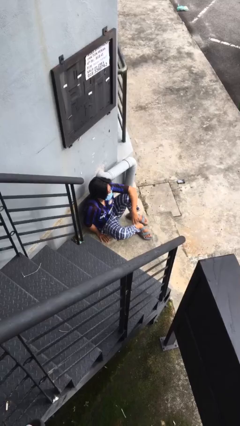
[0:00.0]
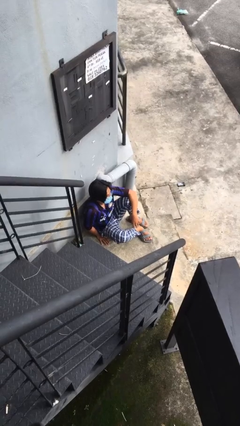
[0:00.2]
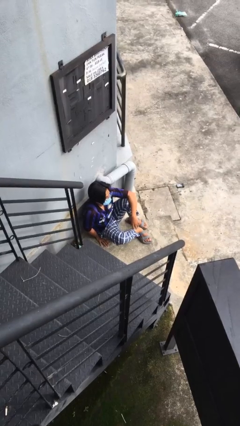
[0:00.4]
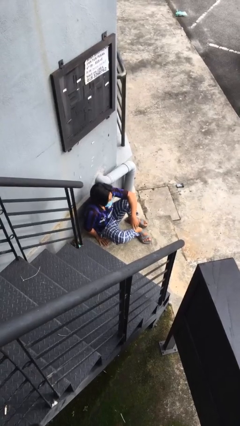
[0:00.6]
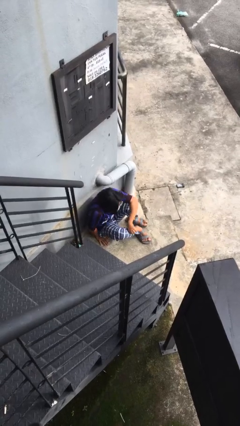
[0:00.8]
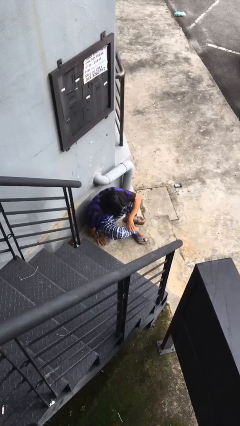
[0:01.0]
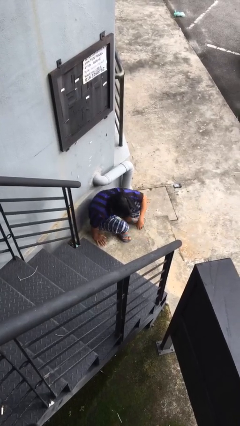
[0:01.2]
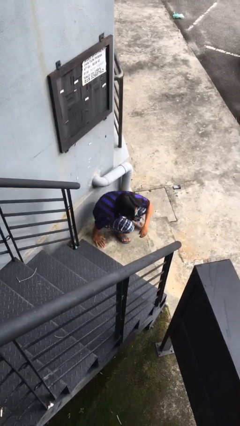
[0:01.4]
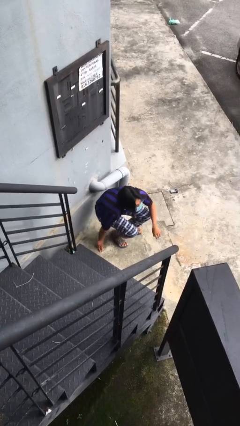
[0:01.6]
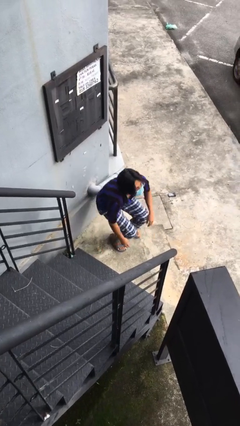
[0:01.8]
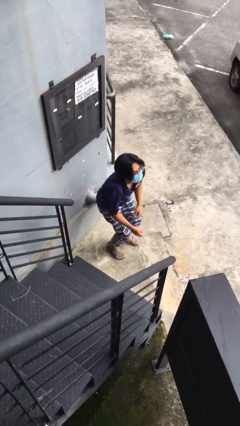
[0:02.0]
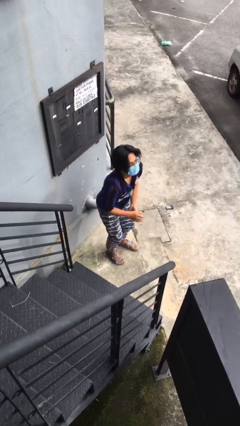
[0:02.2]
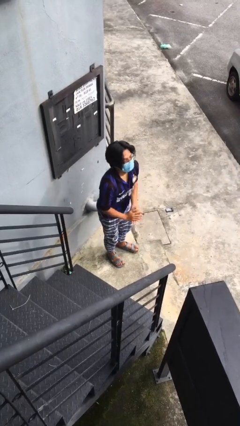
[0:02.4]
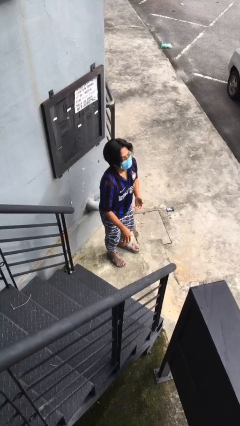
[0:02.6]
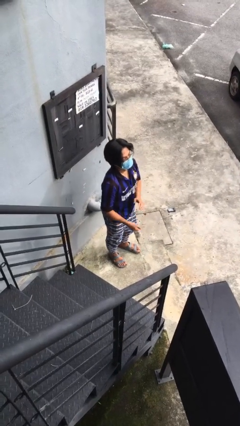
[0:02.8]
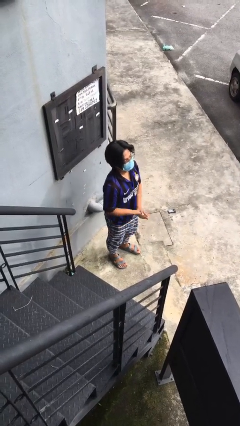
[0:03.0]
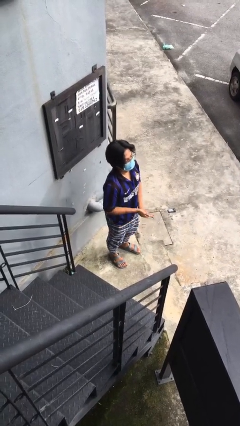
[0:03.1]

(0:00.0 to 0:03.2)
person stands up

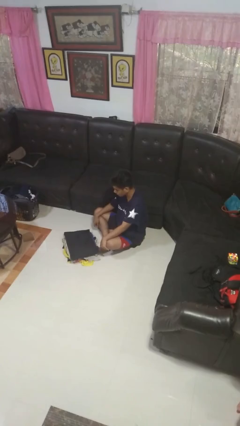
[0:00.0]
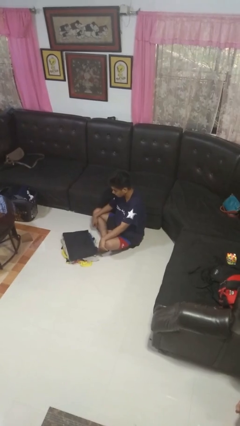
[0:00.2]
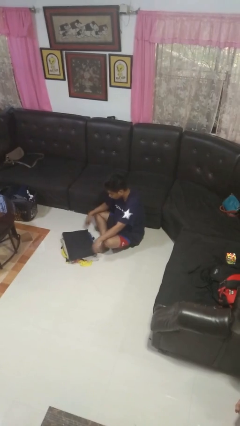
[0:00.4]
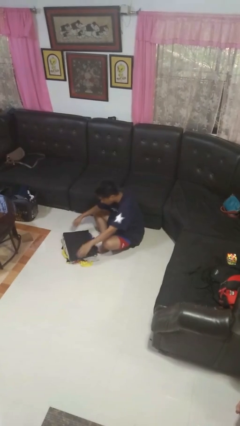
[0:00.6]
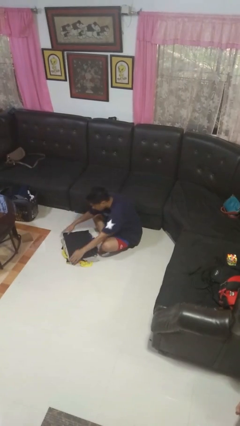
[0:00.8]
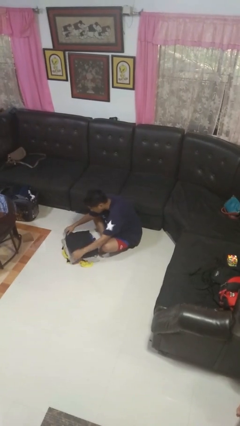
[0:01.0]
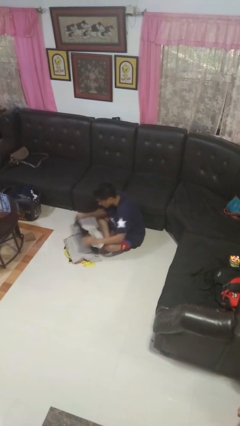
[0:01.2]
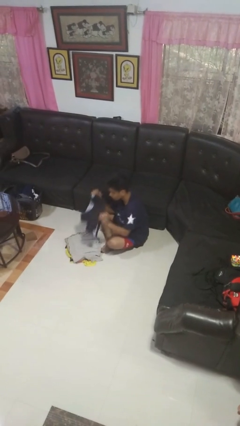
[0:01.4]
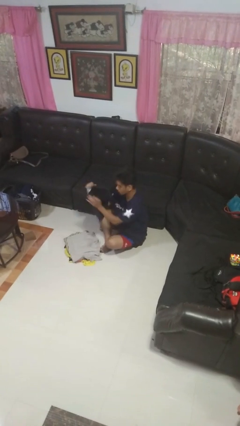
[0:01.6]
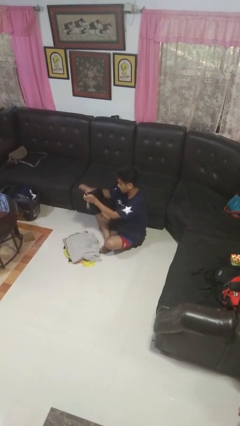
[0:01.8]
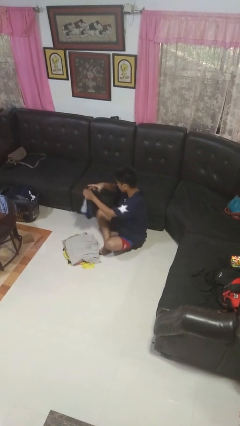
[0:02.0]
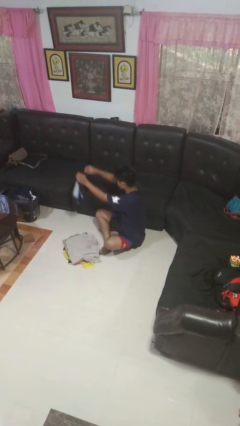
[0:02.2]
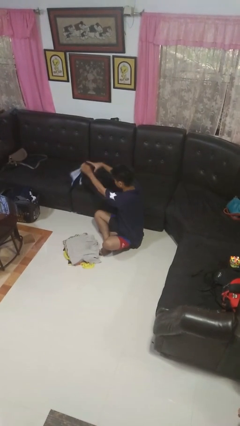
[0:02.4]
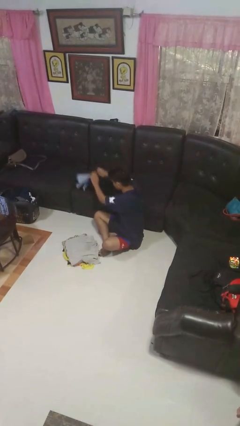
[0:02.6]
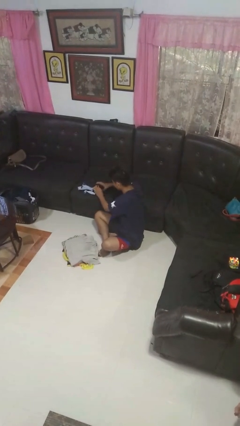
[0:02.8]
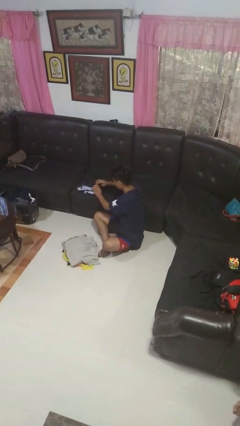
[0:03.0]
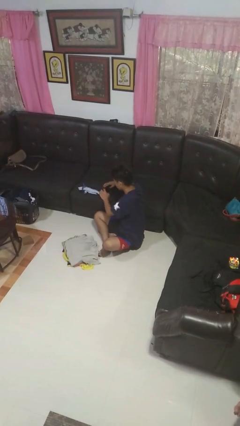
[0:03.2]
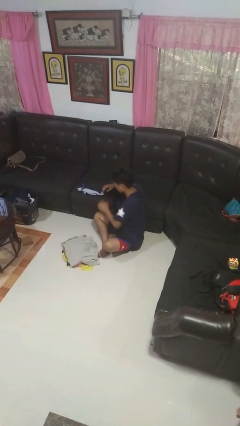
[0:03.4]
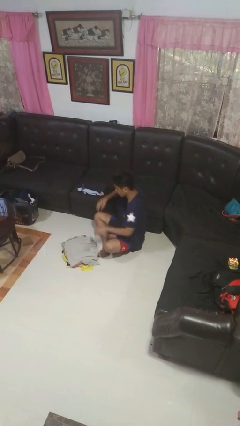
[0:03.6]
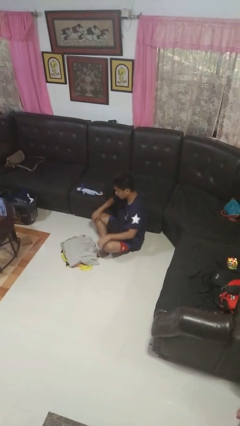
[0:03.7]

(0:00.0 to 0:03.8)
person folds shirt

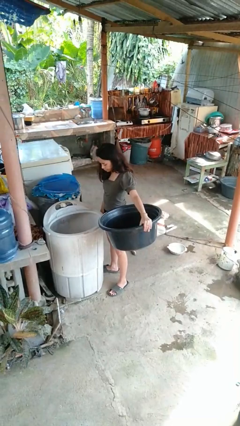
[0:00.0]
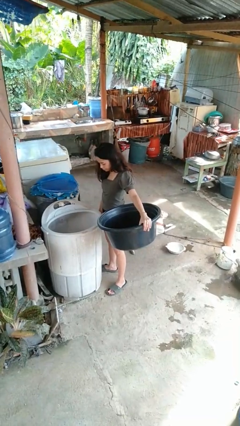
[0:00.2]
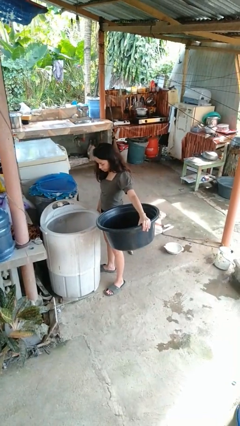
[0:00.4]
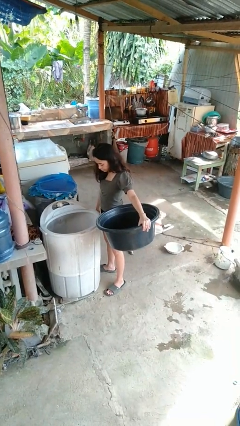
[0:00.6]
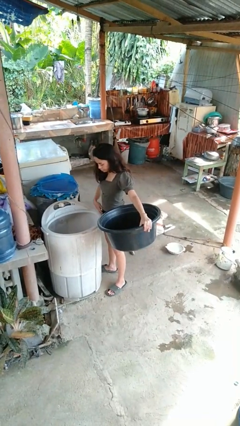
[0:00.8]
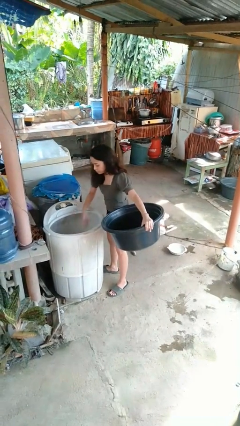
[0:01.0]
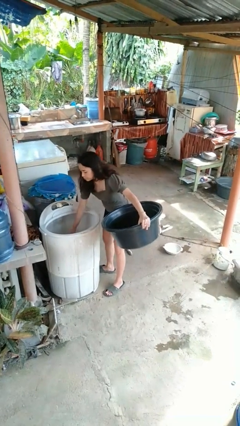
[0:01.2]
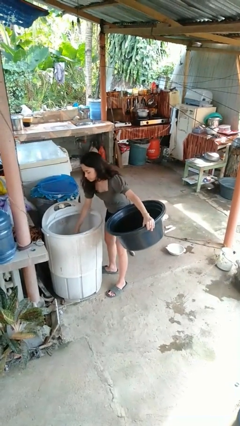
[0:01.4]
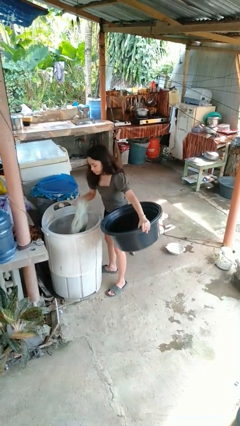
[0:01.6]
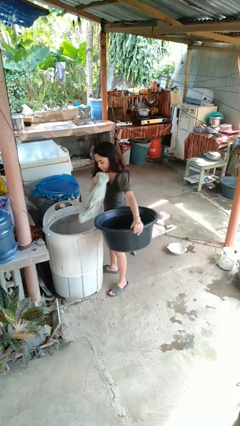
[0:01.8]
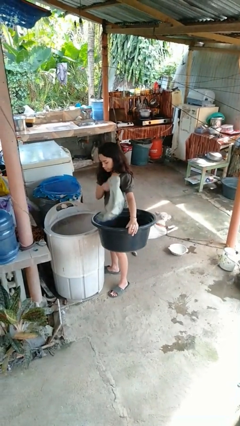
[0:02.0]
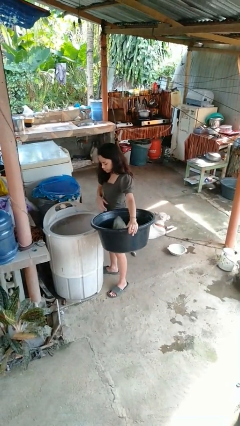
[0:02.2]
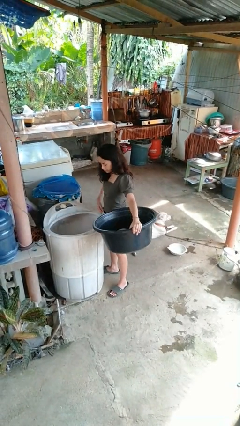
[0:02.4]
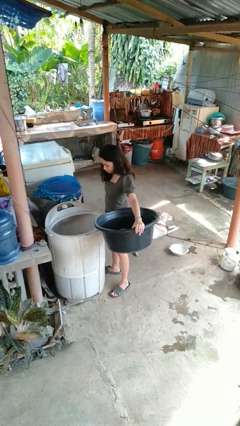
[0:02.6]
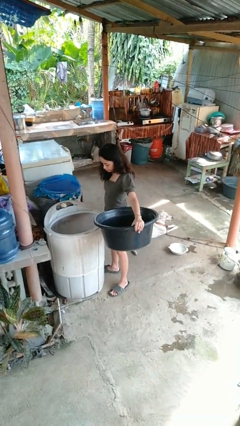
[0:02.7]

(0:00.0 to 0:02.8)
person unloads clotheswasher

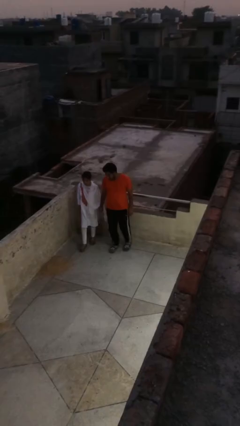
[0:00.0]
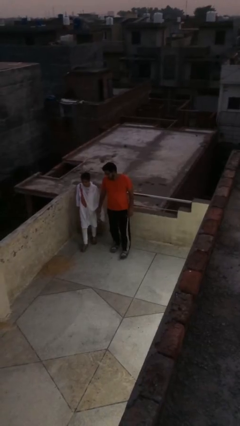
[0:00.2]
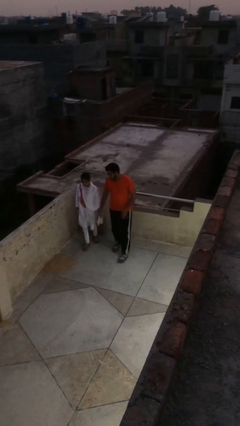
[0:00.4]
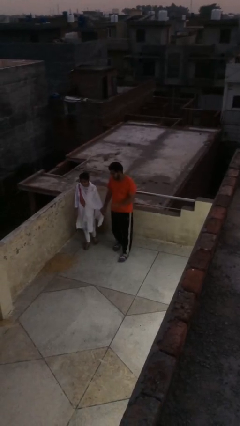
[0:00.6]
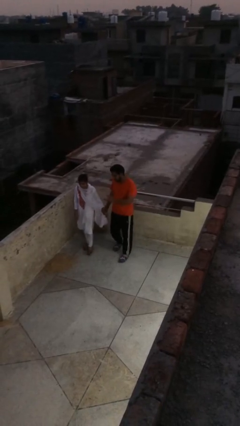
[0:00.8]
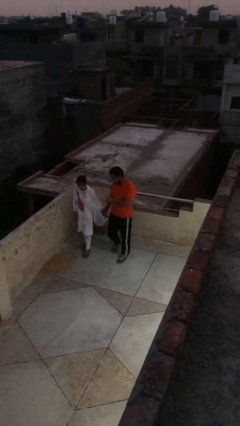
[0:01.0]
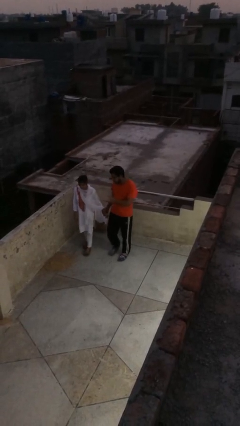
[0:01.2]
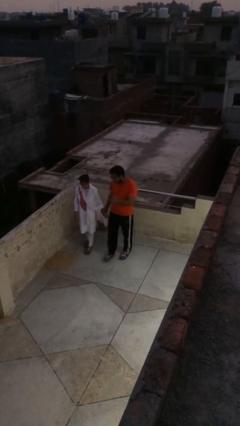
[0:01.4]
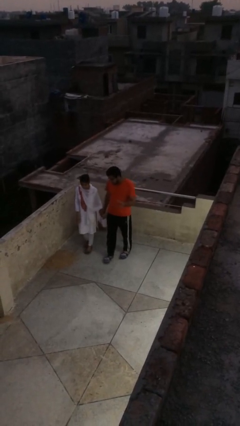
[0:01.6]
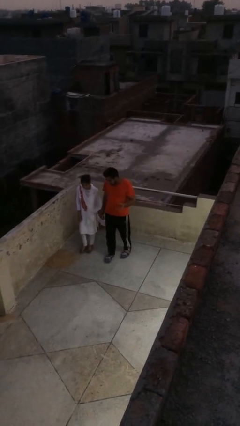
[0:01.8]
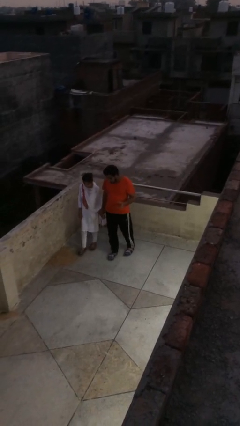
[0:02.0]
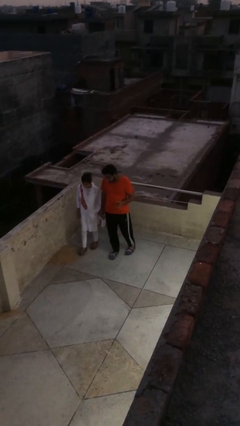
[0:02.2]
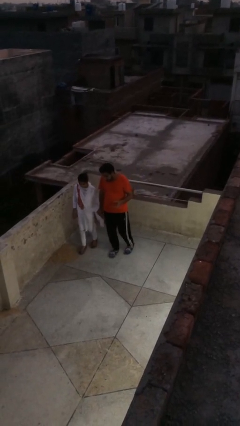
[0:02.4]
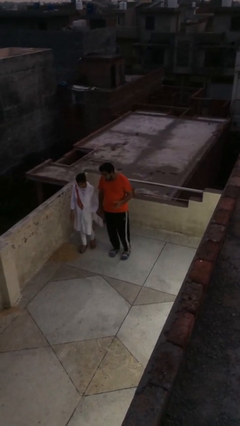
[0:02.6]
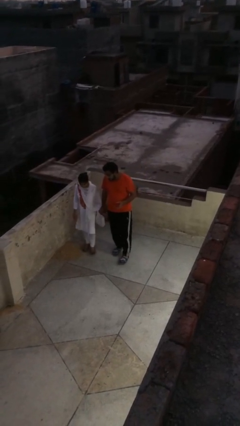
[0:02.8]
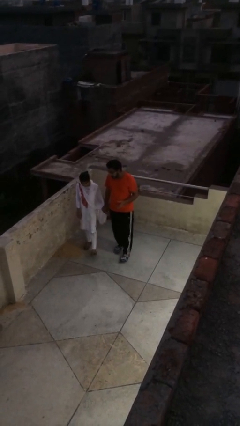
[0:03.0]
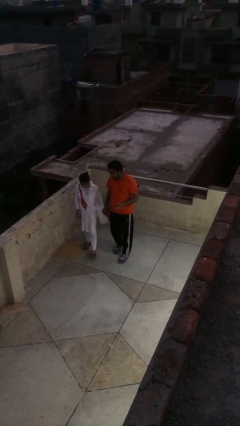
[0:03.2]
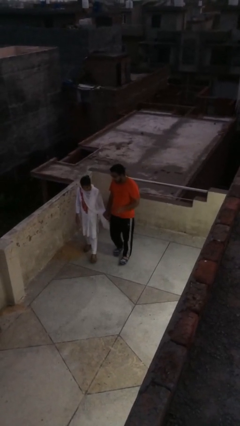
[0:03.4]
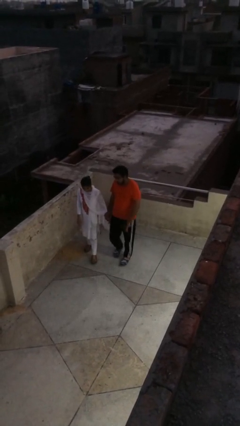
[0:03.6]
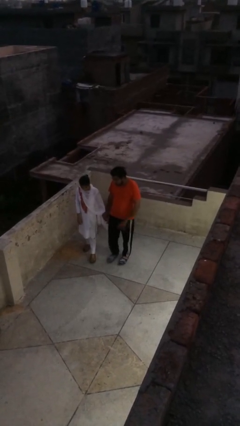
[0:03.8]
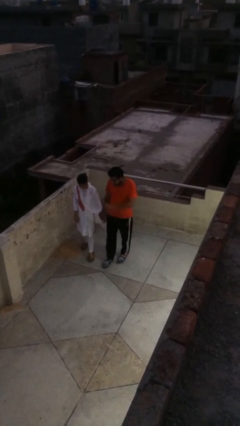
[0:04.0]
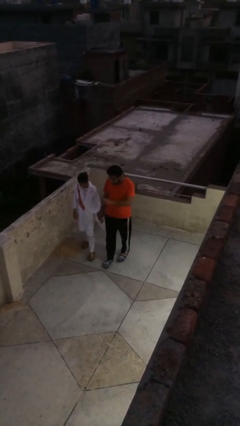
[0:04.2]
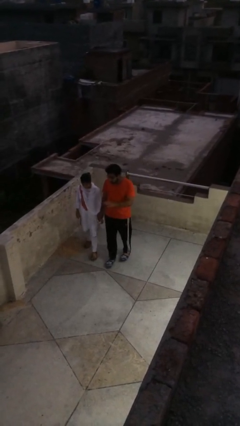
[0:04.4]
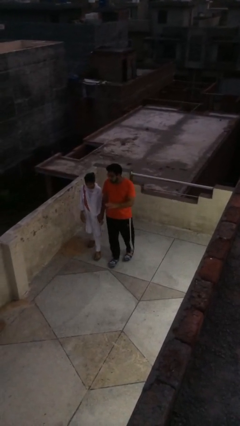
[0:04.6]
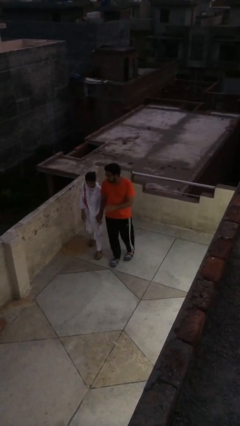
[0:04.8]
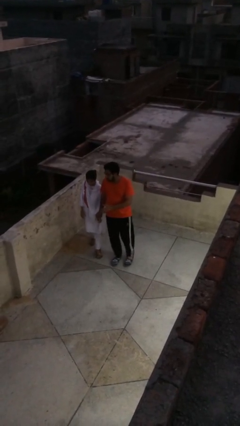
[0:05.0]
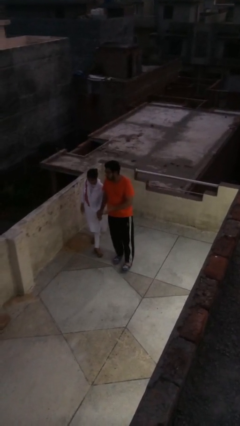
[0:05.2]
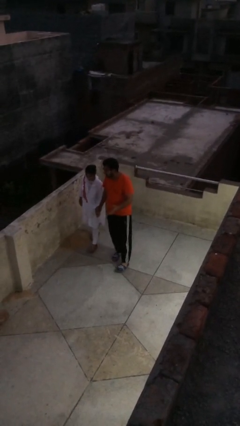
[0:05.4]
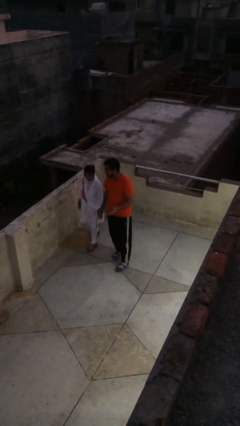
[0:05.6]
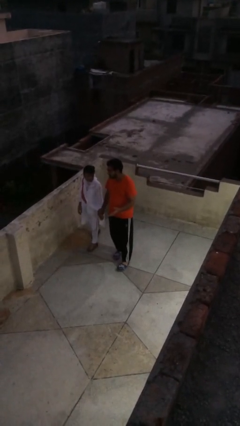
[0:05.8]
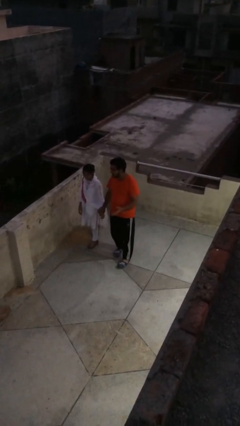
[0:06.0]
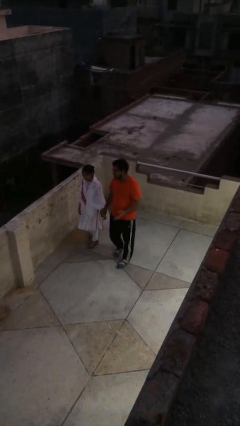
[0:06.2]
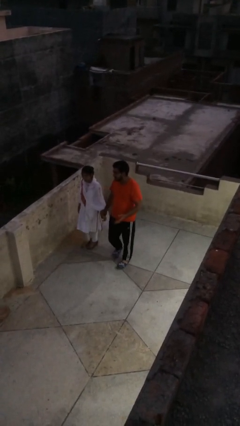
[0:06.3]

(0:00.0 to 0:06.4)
person holds hand

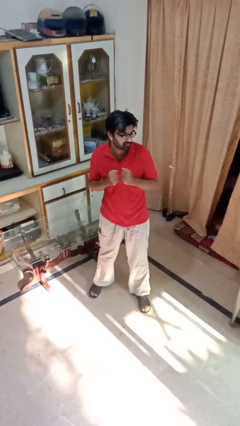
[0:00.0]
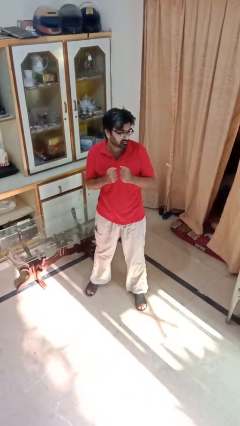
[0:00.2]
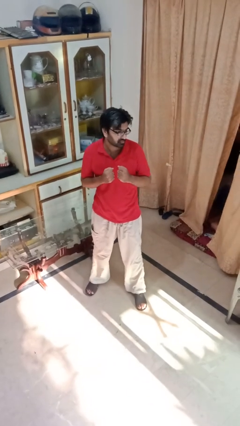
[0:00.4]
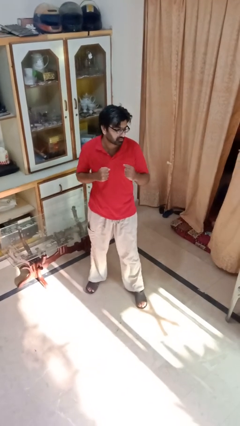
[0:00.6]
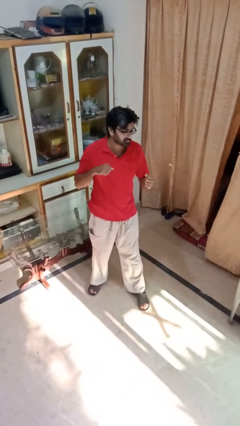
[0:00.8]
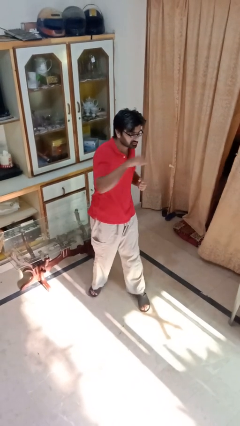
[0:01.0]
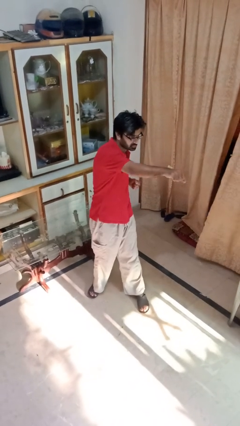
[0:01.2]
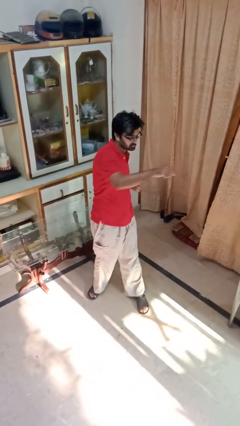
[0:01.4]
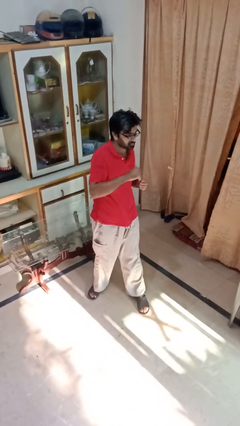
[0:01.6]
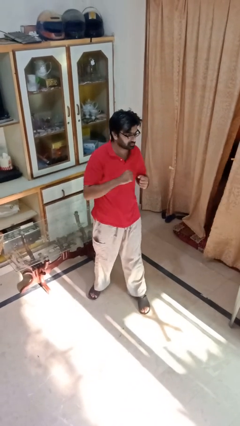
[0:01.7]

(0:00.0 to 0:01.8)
person punches
